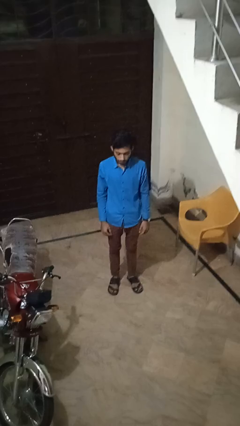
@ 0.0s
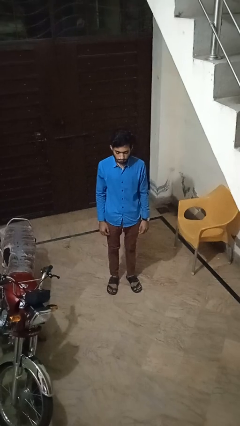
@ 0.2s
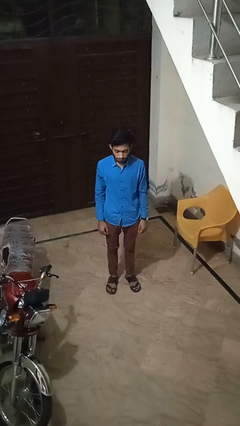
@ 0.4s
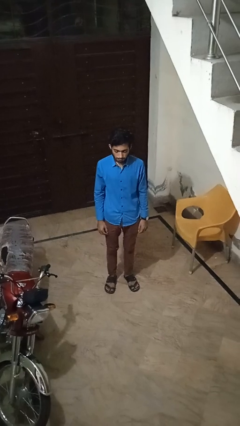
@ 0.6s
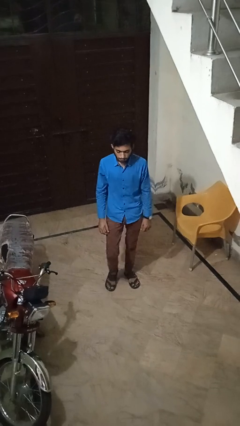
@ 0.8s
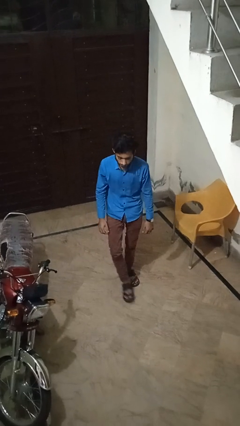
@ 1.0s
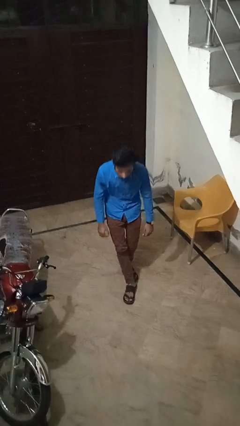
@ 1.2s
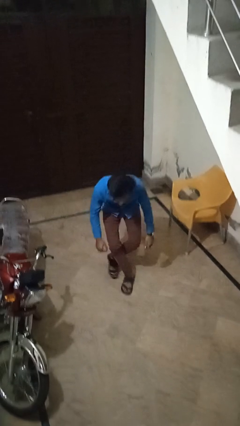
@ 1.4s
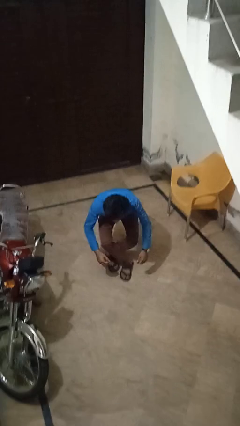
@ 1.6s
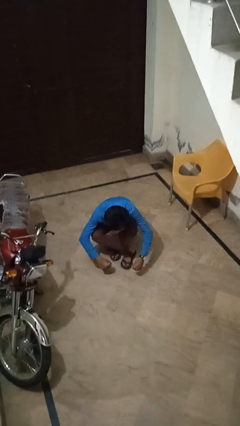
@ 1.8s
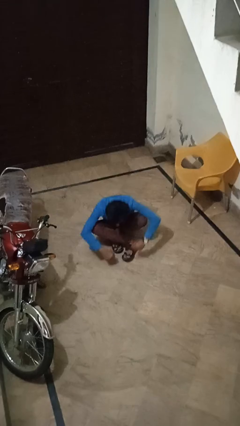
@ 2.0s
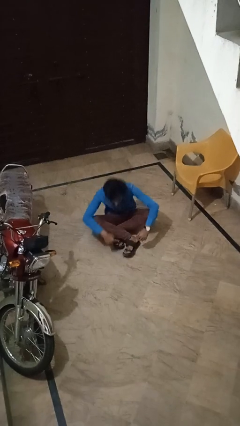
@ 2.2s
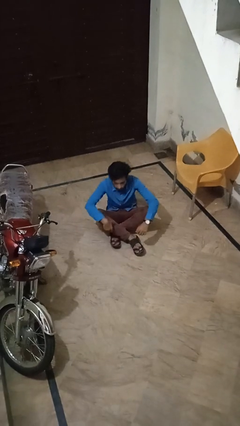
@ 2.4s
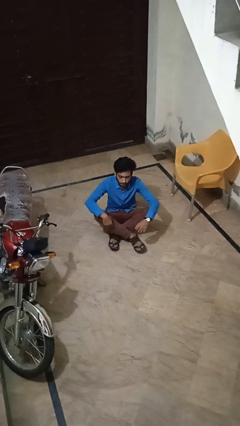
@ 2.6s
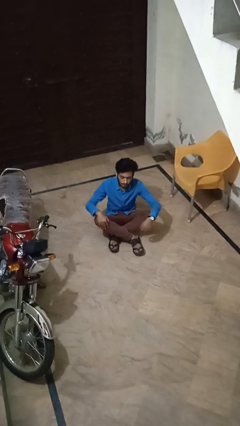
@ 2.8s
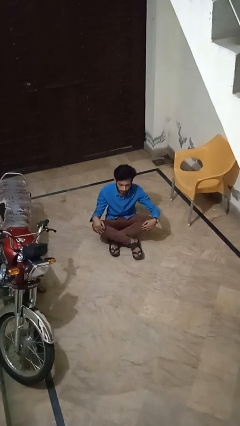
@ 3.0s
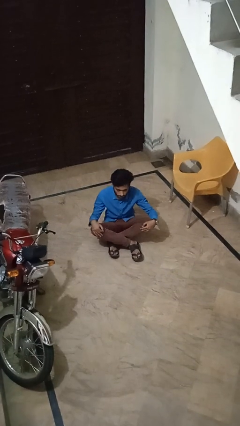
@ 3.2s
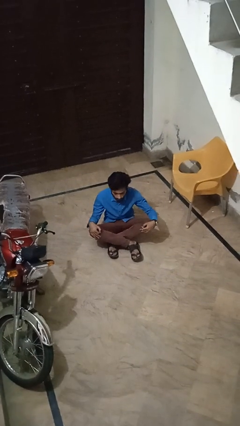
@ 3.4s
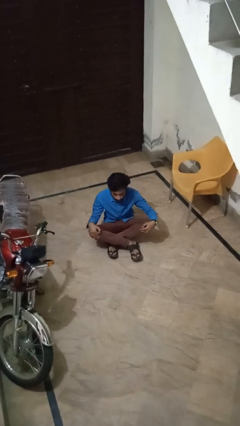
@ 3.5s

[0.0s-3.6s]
person sits crisscross

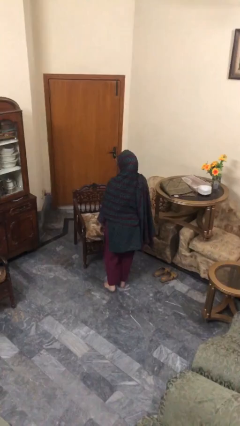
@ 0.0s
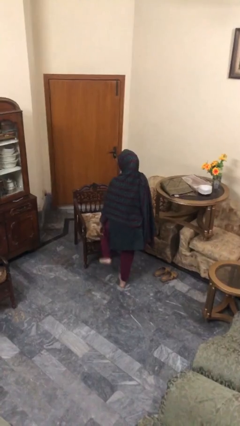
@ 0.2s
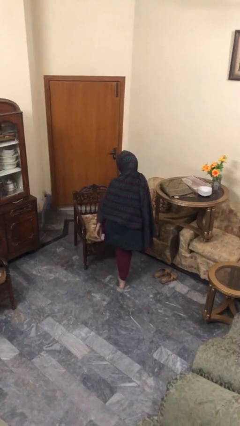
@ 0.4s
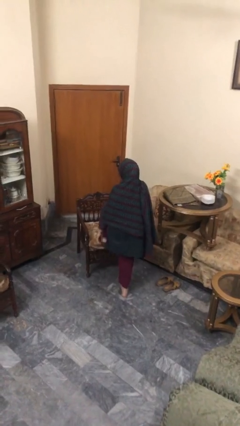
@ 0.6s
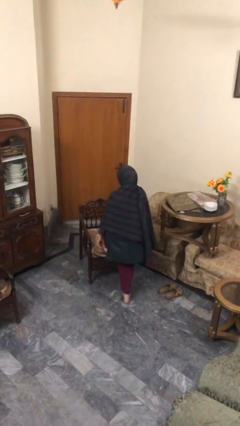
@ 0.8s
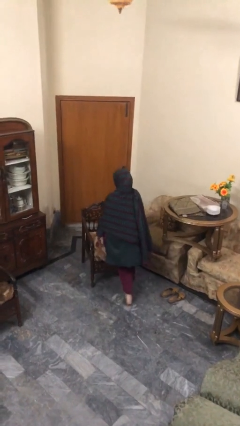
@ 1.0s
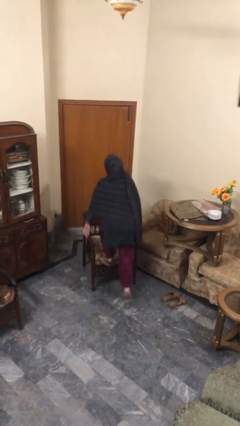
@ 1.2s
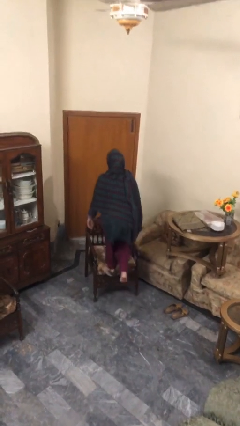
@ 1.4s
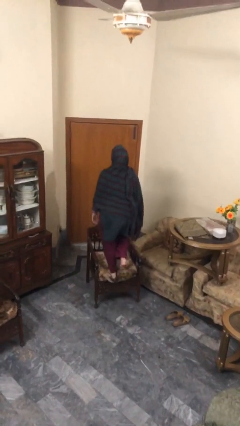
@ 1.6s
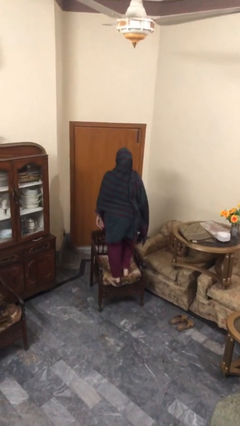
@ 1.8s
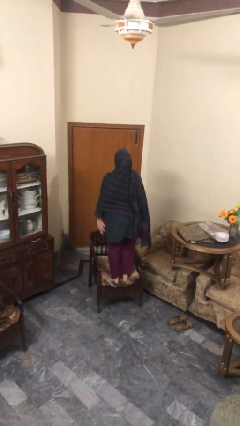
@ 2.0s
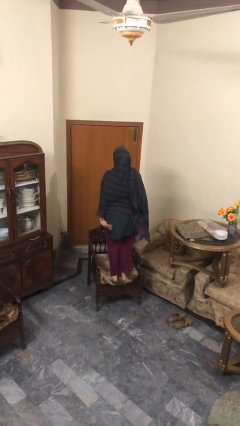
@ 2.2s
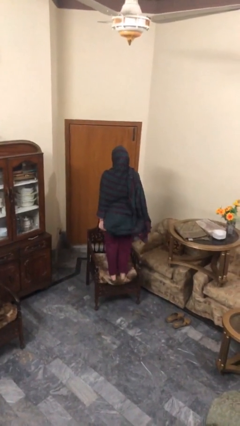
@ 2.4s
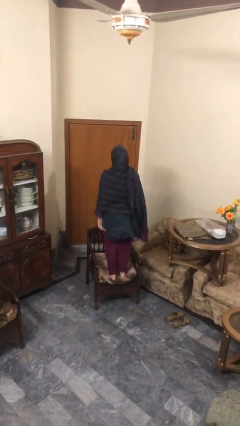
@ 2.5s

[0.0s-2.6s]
person climbs on chair

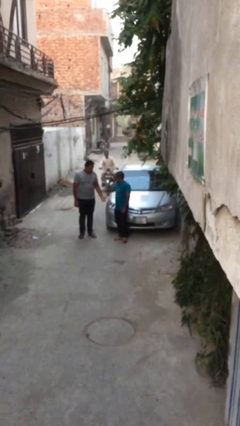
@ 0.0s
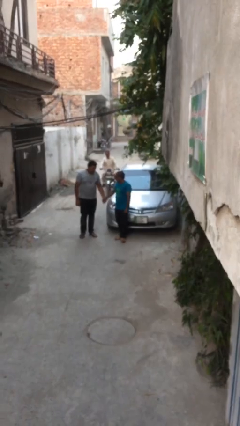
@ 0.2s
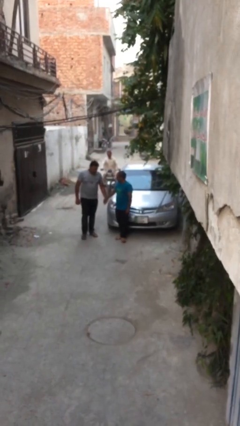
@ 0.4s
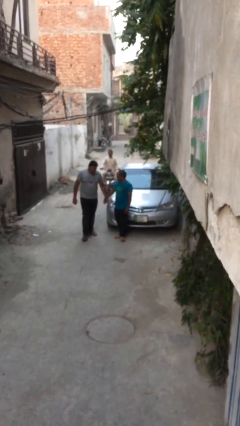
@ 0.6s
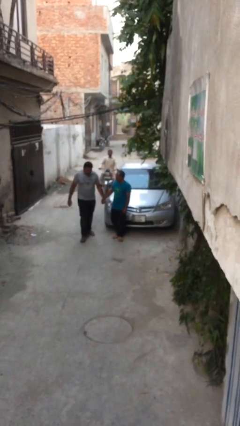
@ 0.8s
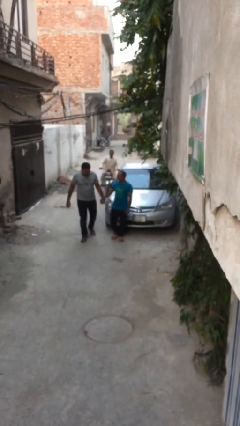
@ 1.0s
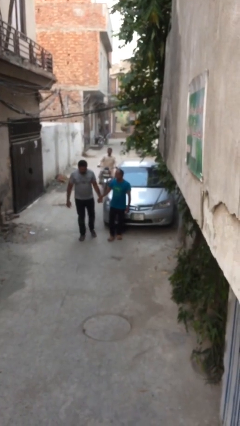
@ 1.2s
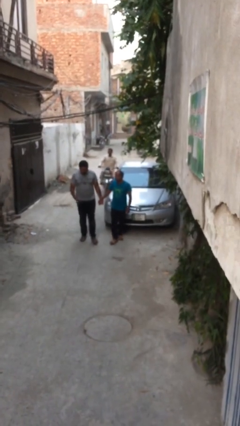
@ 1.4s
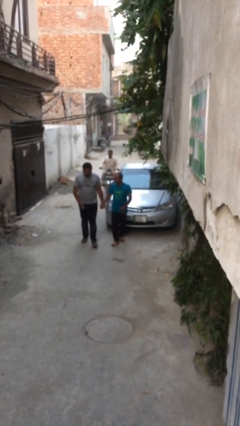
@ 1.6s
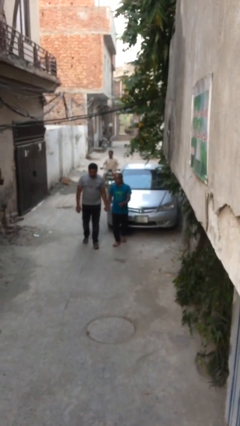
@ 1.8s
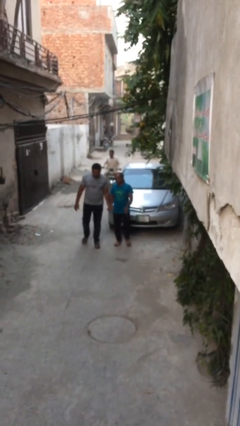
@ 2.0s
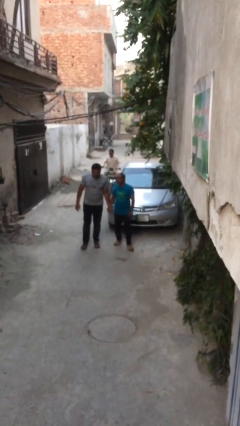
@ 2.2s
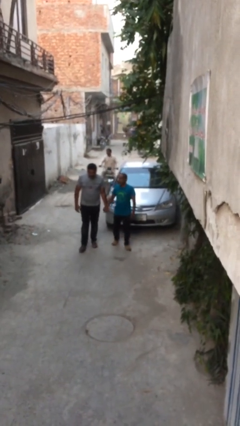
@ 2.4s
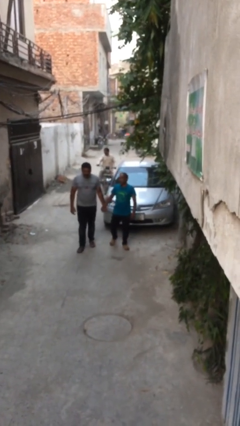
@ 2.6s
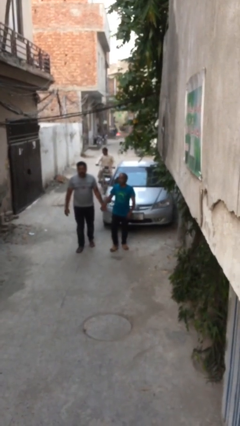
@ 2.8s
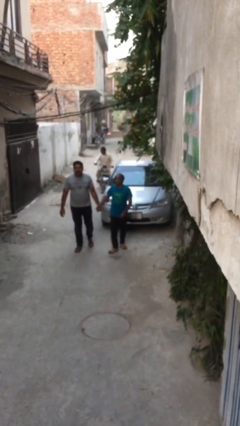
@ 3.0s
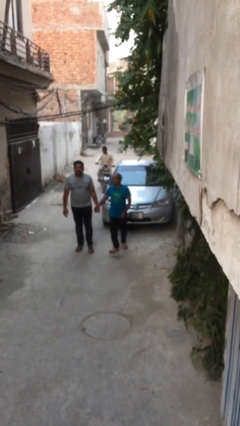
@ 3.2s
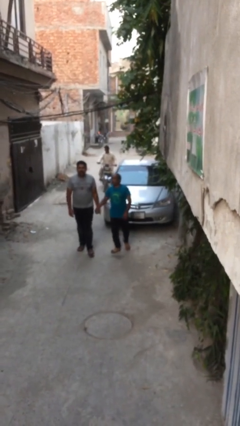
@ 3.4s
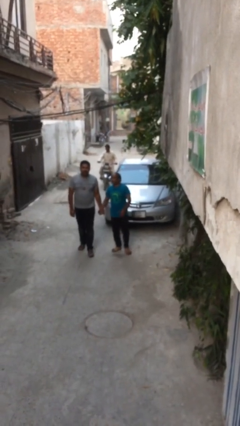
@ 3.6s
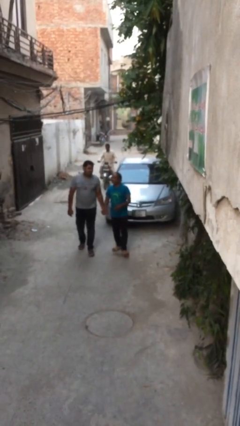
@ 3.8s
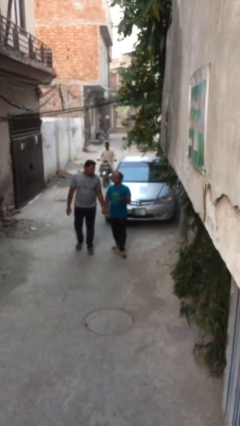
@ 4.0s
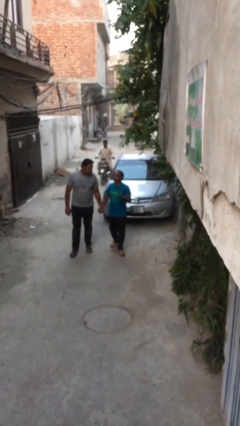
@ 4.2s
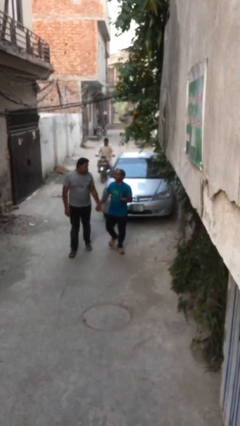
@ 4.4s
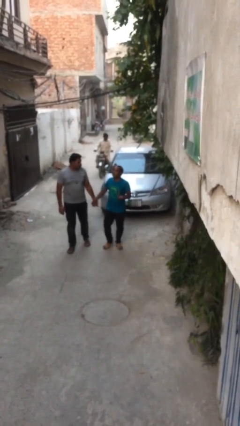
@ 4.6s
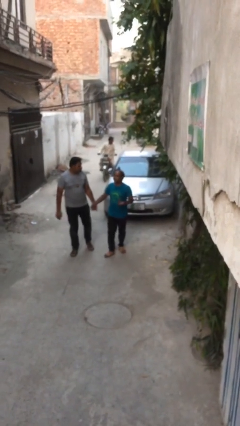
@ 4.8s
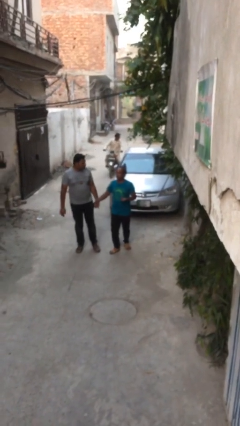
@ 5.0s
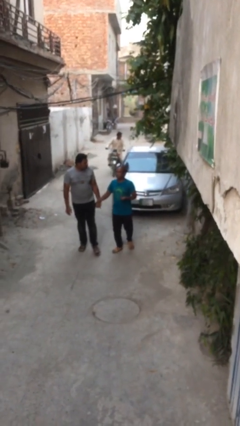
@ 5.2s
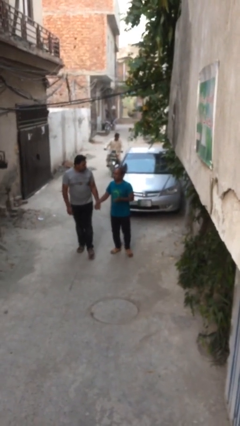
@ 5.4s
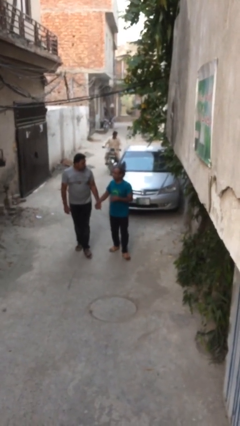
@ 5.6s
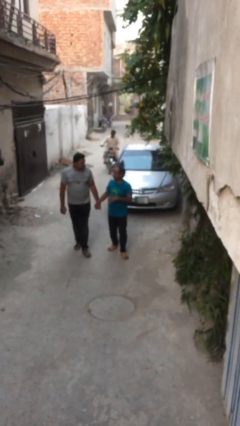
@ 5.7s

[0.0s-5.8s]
person holds hand

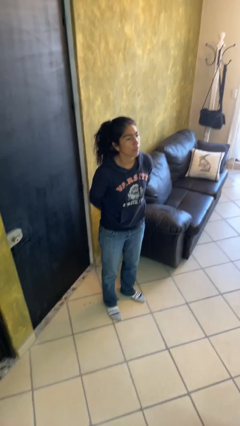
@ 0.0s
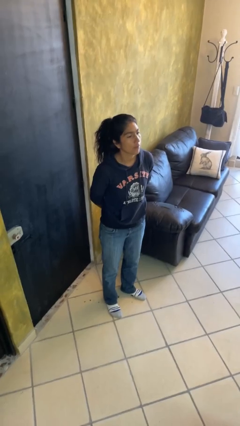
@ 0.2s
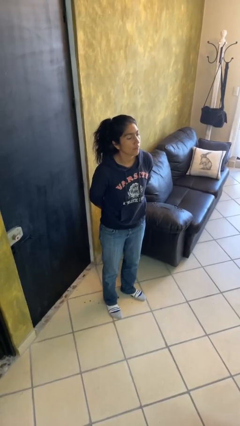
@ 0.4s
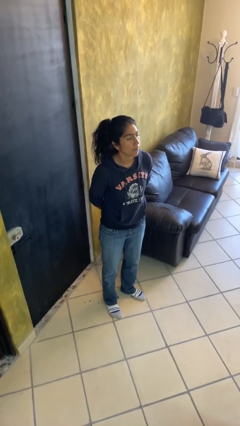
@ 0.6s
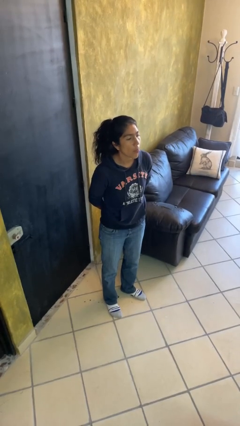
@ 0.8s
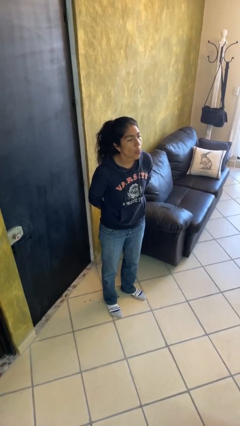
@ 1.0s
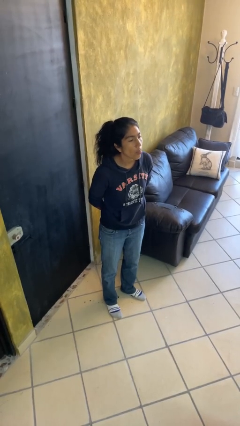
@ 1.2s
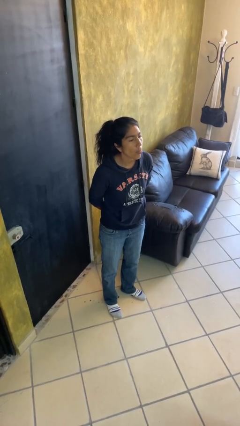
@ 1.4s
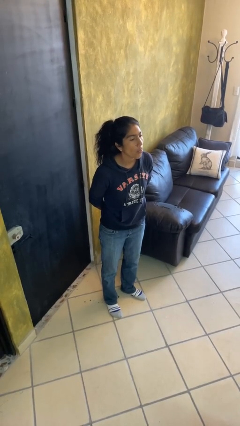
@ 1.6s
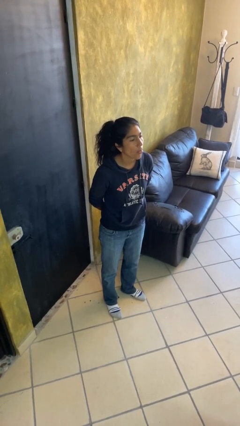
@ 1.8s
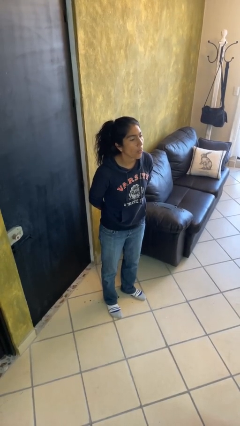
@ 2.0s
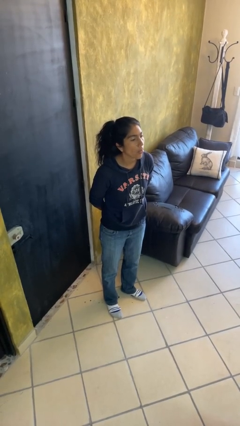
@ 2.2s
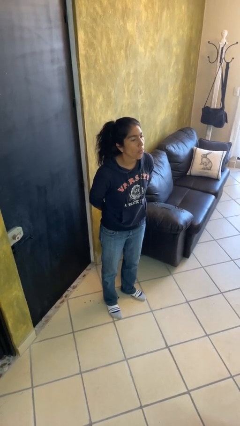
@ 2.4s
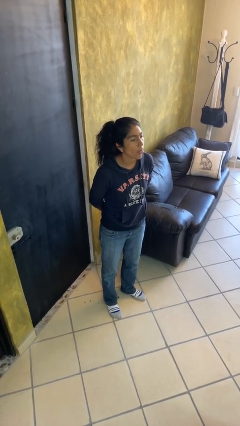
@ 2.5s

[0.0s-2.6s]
person sticks out tongue

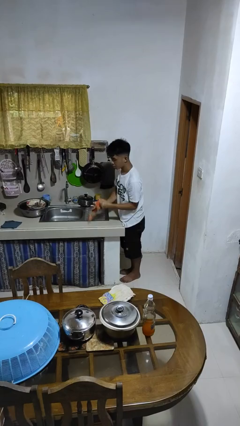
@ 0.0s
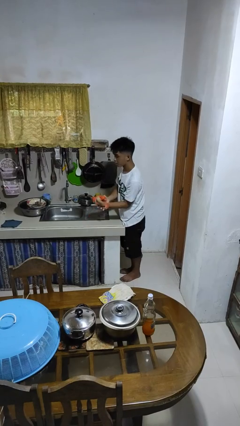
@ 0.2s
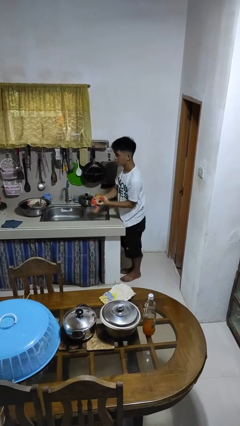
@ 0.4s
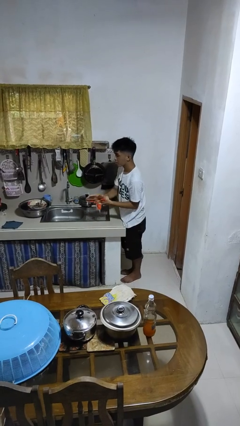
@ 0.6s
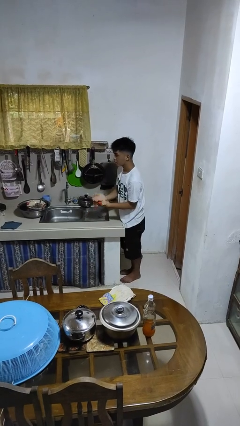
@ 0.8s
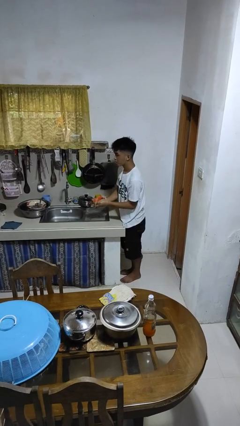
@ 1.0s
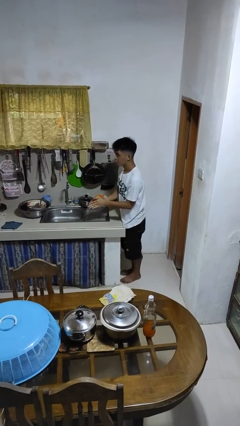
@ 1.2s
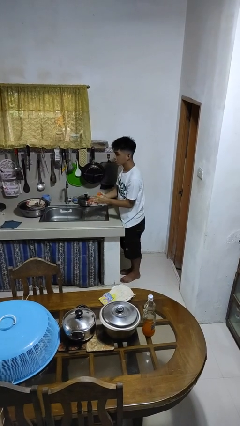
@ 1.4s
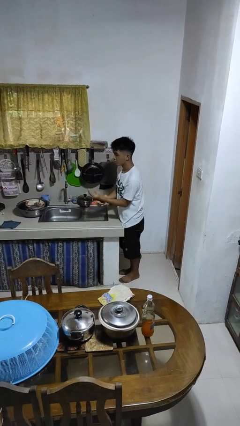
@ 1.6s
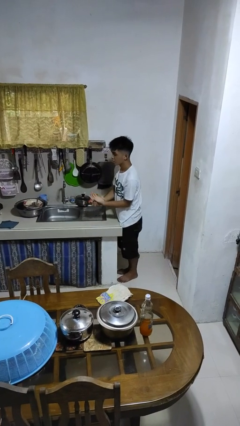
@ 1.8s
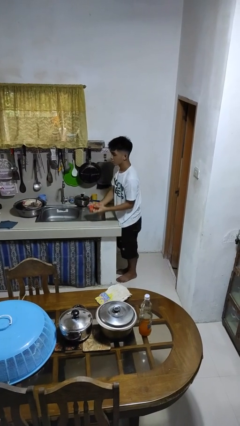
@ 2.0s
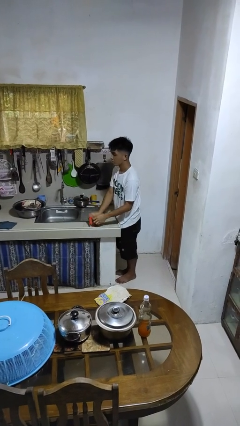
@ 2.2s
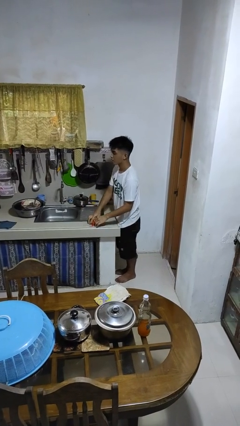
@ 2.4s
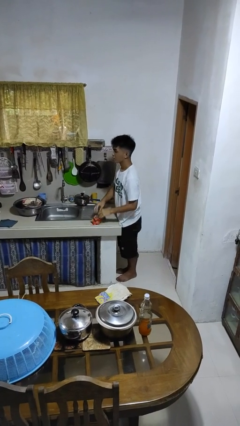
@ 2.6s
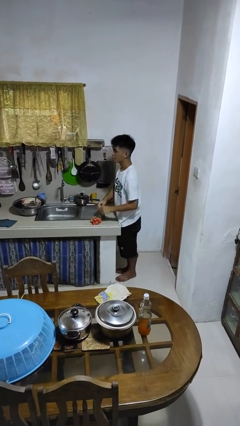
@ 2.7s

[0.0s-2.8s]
person dries hands with towel

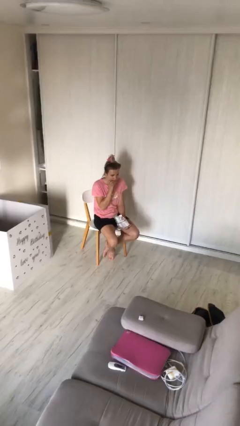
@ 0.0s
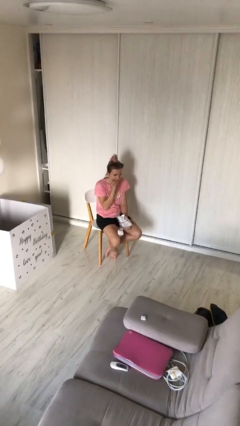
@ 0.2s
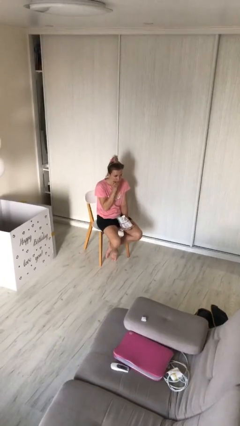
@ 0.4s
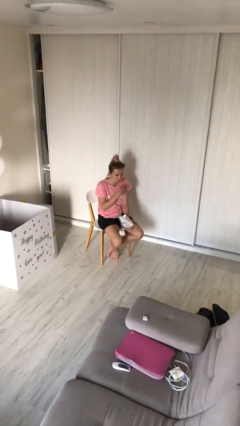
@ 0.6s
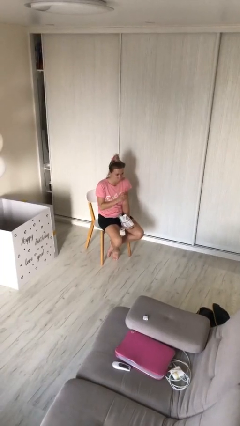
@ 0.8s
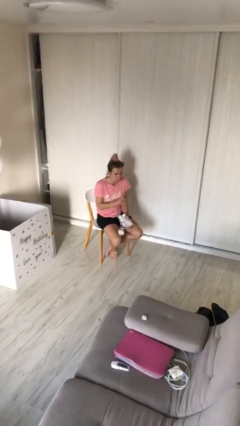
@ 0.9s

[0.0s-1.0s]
person eats snack from bag
